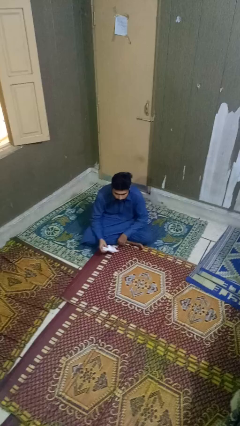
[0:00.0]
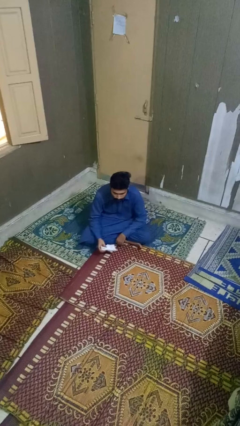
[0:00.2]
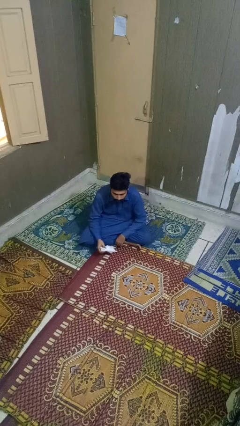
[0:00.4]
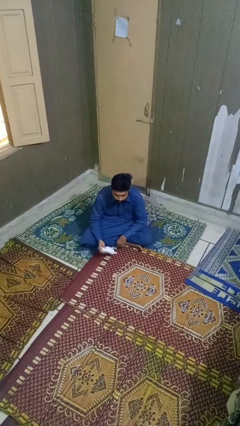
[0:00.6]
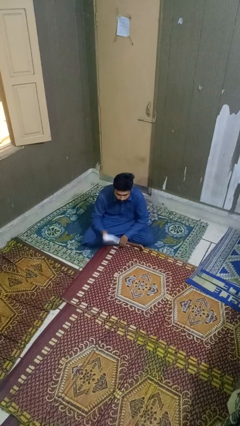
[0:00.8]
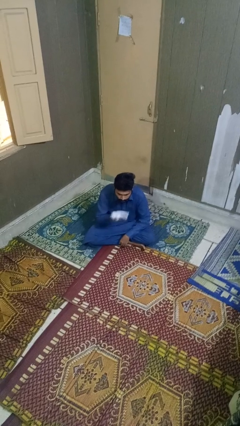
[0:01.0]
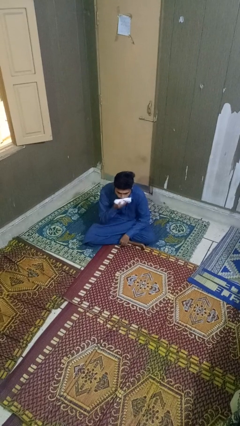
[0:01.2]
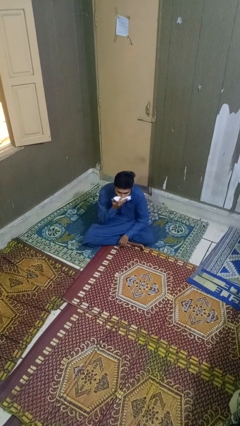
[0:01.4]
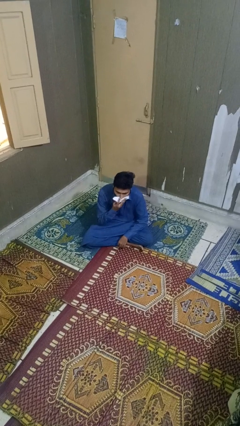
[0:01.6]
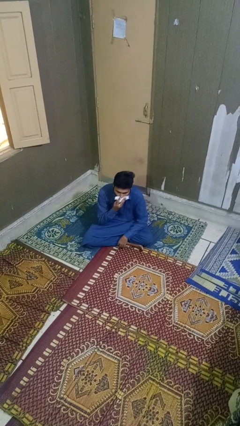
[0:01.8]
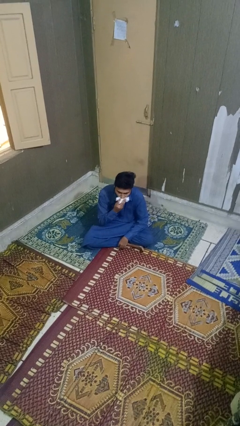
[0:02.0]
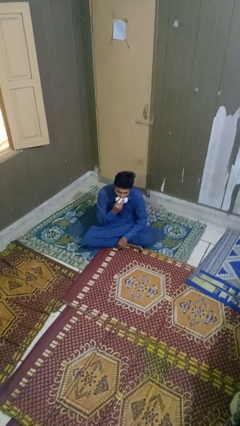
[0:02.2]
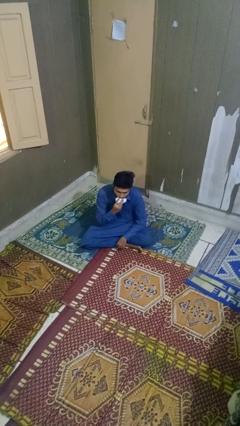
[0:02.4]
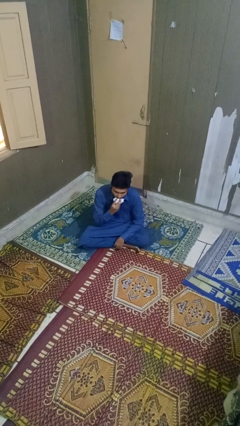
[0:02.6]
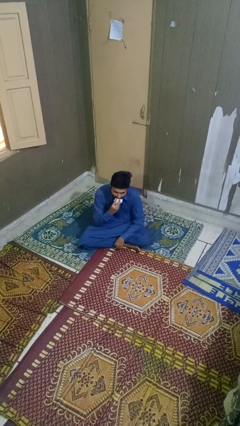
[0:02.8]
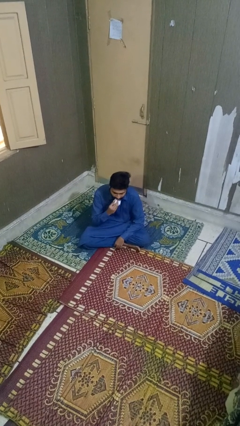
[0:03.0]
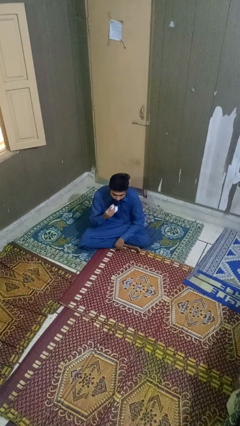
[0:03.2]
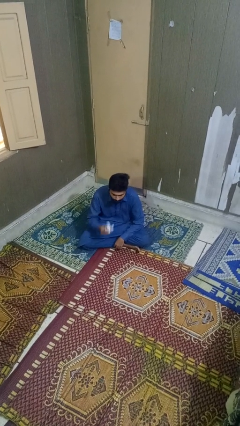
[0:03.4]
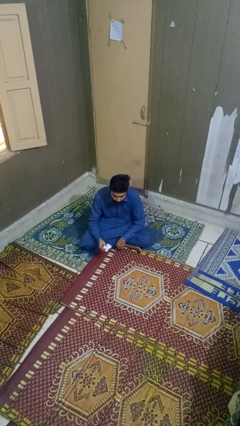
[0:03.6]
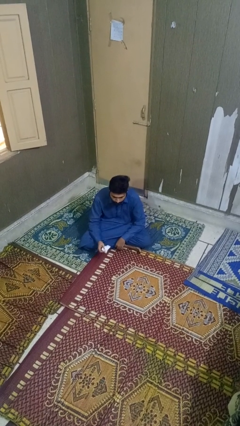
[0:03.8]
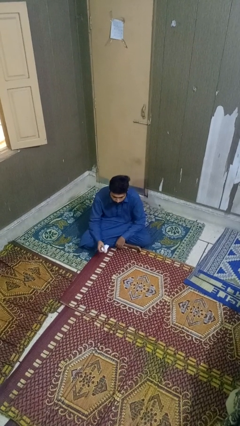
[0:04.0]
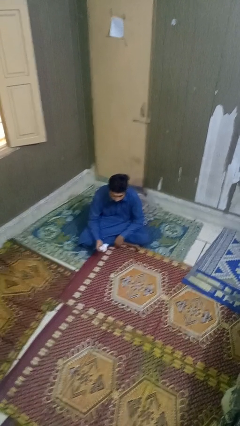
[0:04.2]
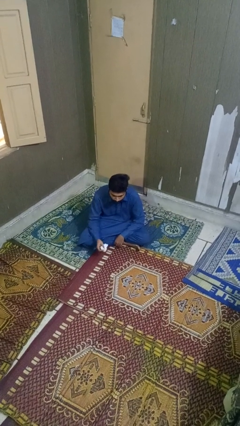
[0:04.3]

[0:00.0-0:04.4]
person wipes mouth with napkin

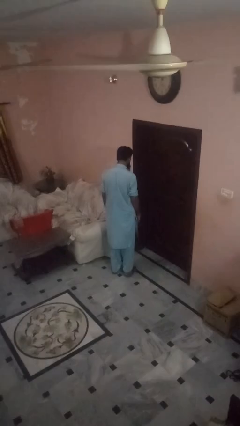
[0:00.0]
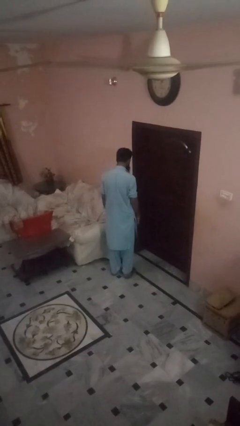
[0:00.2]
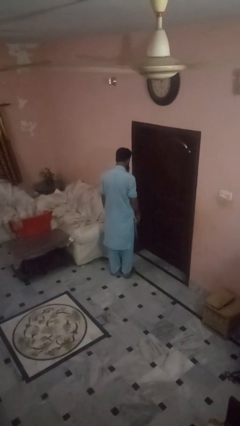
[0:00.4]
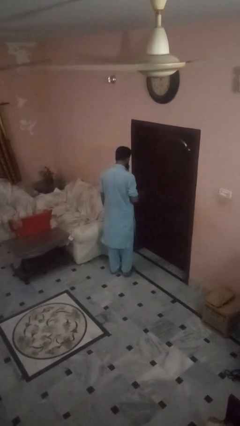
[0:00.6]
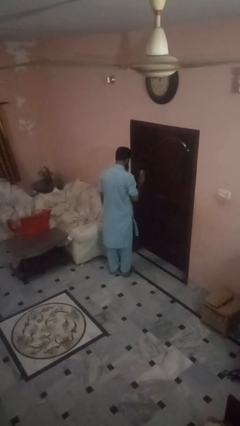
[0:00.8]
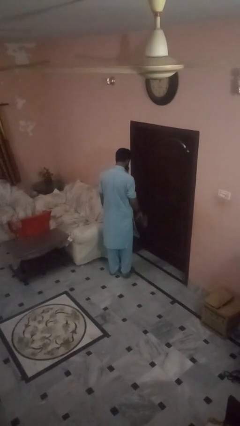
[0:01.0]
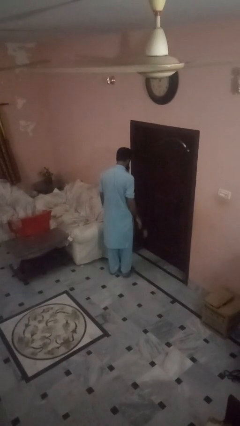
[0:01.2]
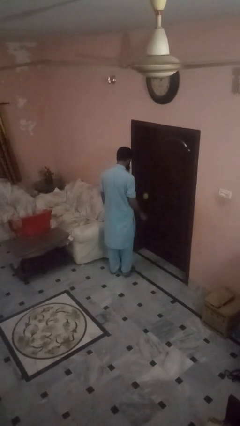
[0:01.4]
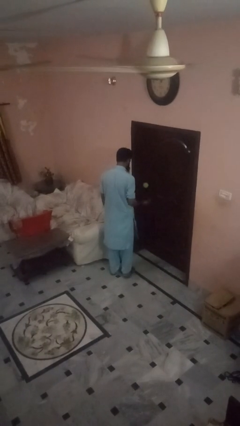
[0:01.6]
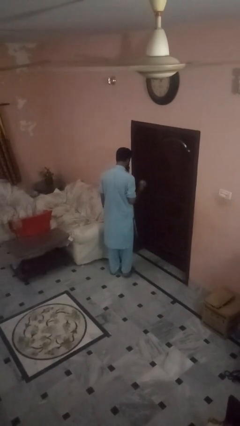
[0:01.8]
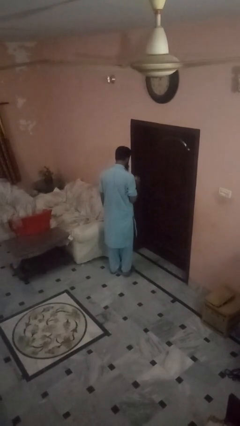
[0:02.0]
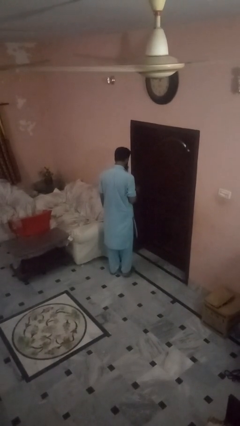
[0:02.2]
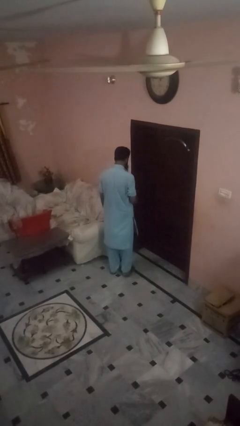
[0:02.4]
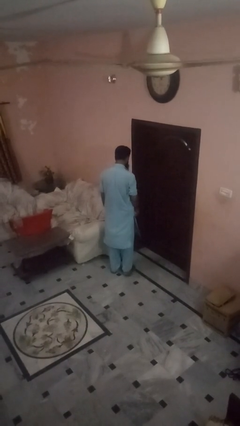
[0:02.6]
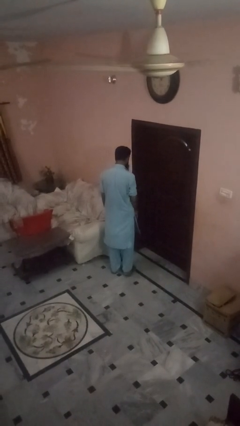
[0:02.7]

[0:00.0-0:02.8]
person bounces ball on floor

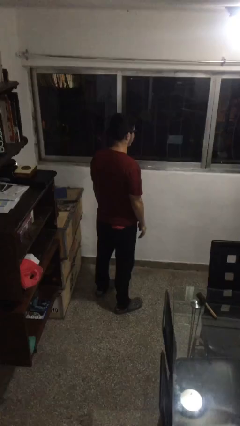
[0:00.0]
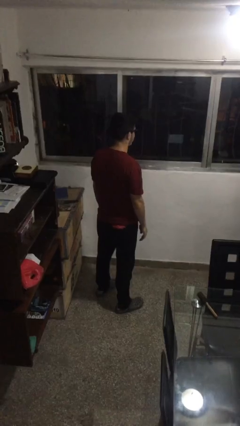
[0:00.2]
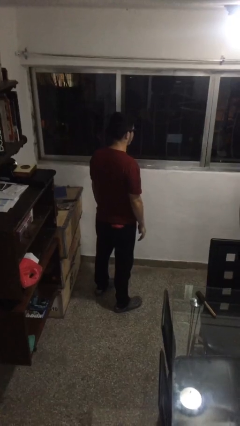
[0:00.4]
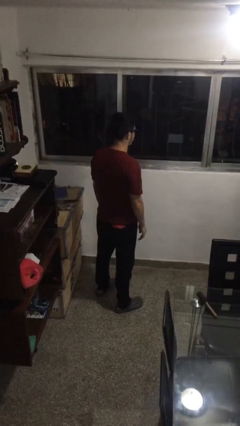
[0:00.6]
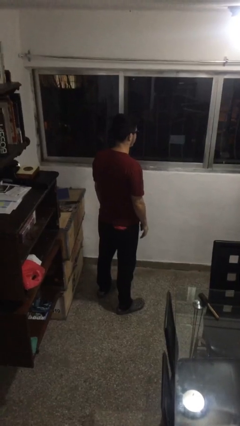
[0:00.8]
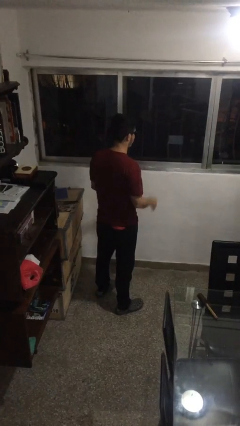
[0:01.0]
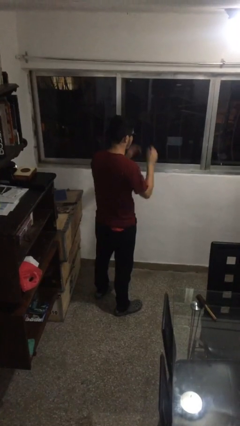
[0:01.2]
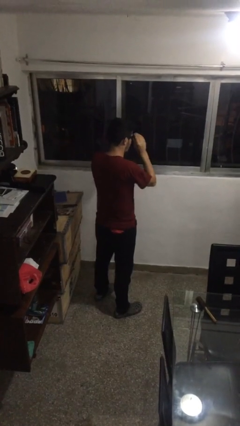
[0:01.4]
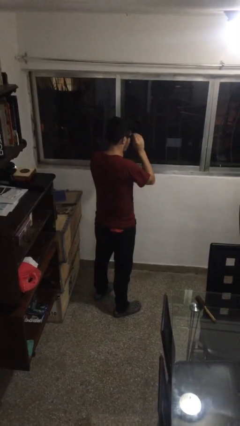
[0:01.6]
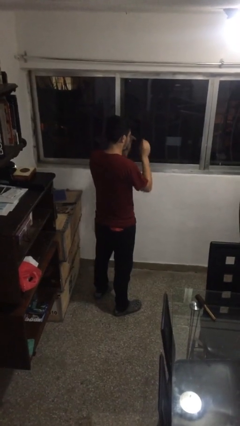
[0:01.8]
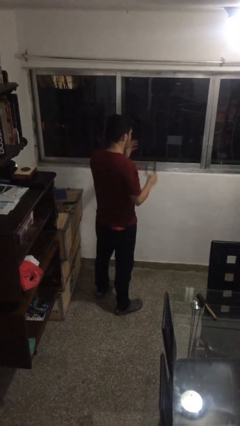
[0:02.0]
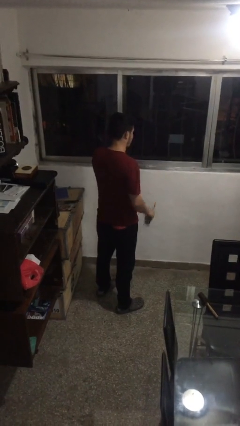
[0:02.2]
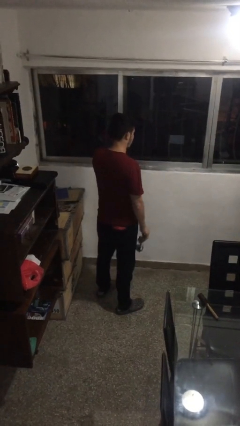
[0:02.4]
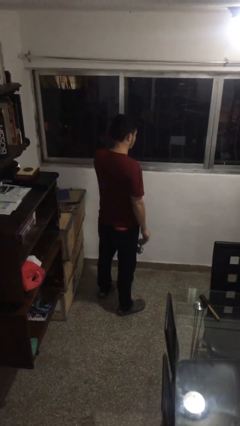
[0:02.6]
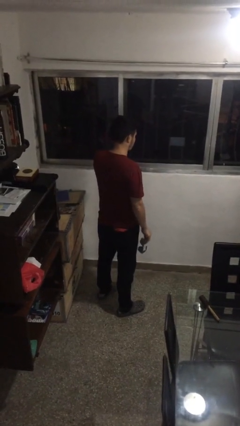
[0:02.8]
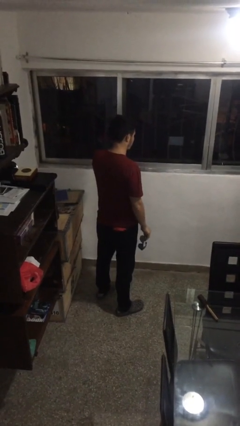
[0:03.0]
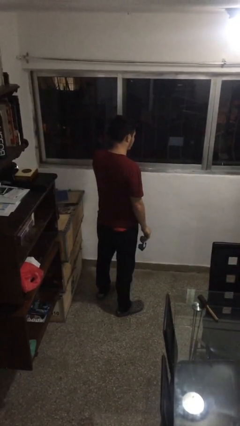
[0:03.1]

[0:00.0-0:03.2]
person takes off sunglasses

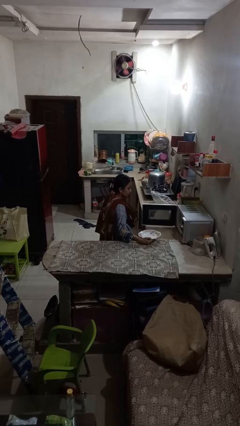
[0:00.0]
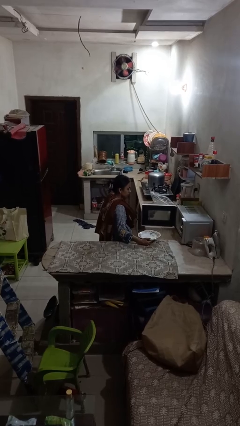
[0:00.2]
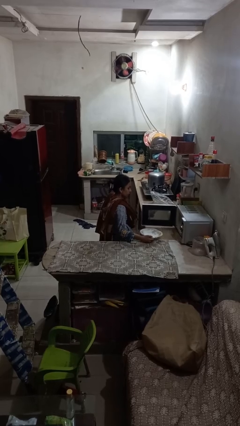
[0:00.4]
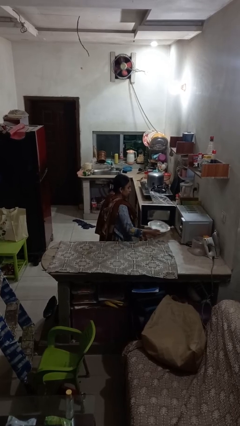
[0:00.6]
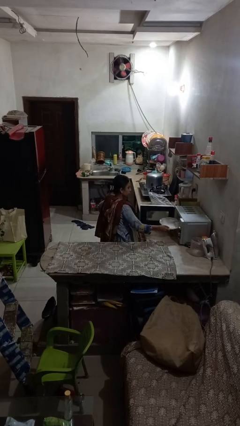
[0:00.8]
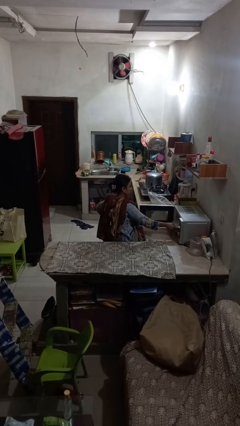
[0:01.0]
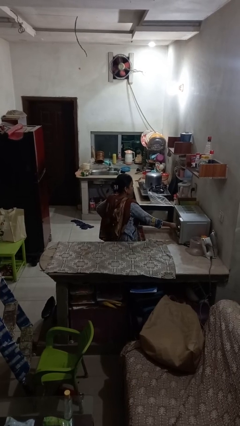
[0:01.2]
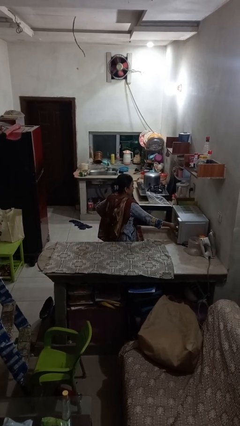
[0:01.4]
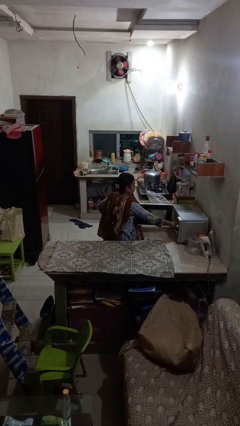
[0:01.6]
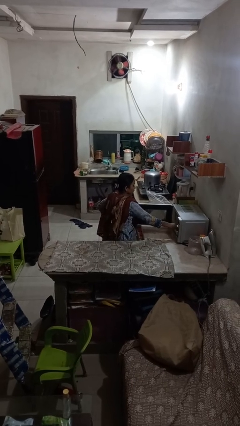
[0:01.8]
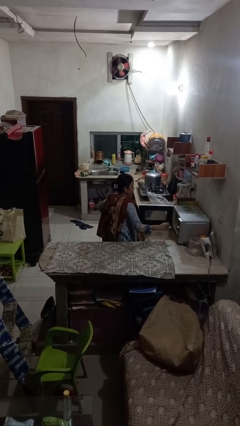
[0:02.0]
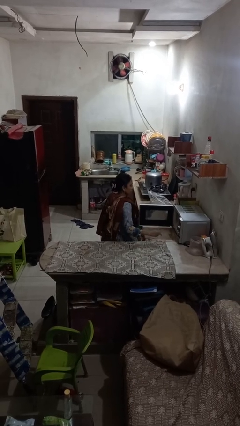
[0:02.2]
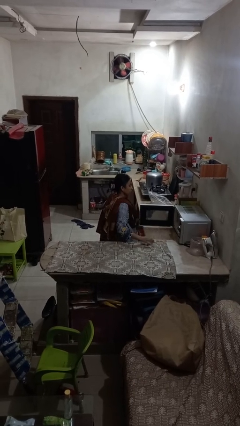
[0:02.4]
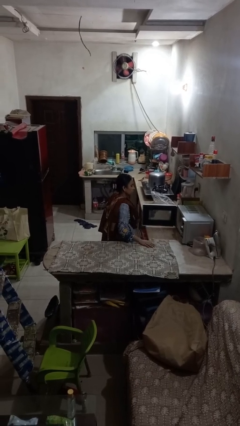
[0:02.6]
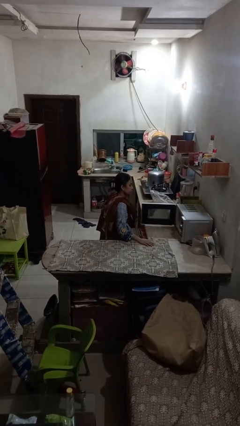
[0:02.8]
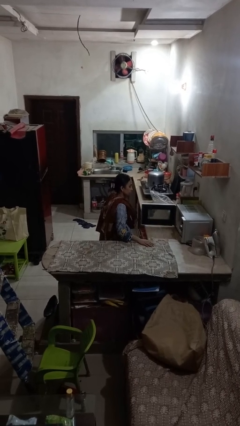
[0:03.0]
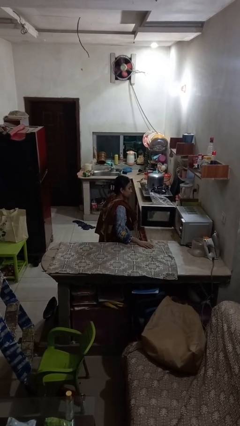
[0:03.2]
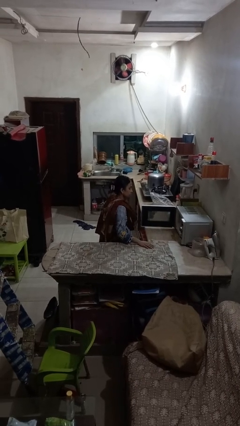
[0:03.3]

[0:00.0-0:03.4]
person puts object into microwave

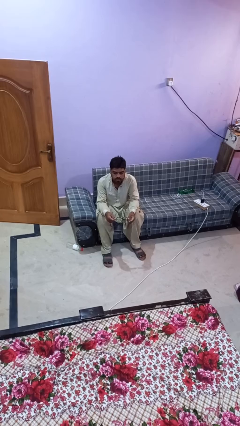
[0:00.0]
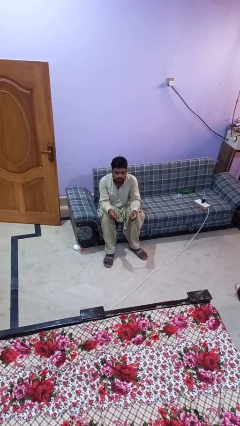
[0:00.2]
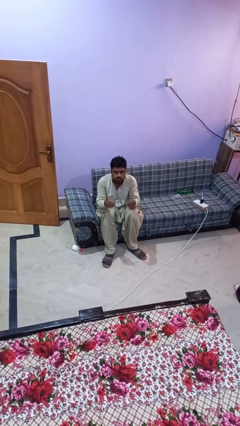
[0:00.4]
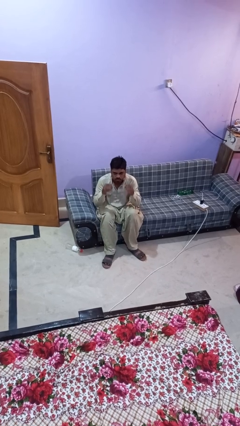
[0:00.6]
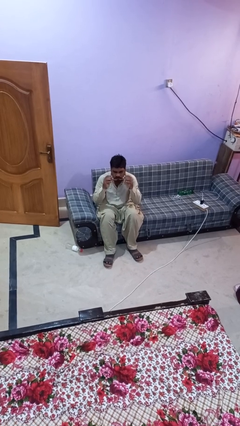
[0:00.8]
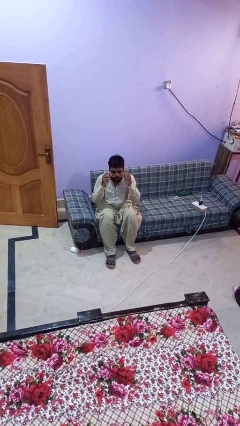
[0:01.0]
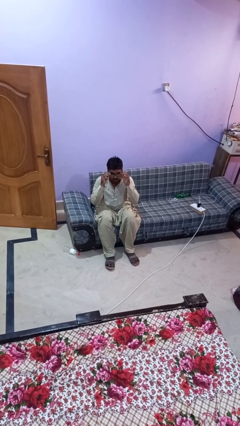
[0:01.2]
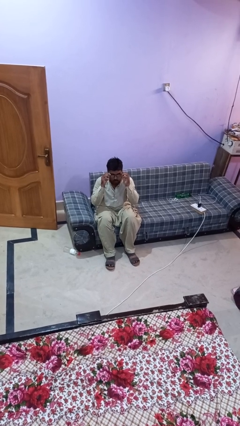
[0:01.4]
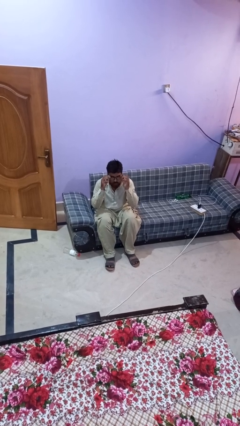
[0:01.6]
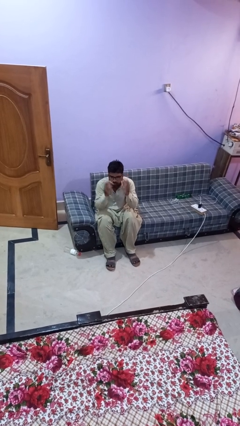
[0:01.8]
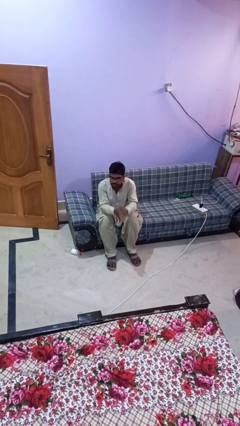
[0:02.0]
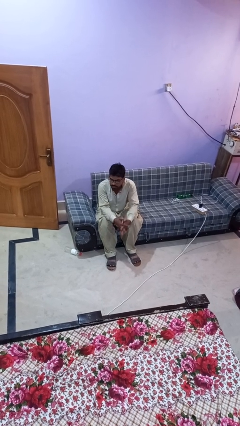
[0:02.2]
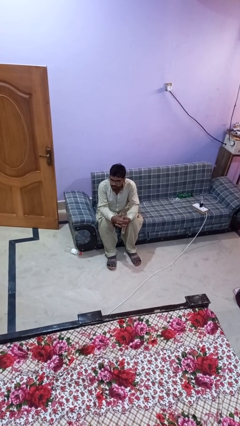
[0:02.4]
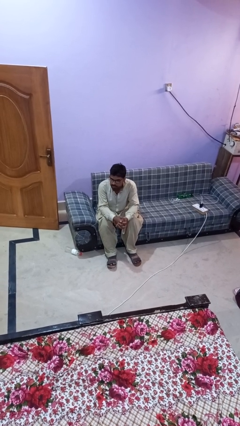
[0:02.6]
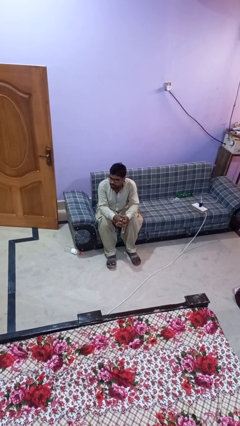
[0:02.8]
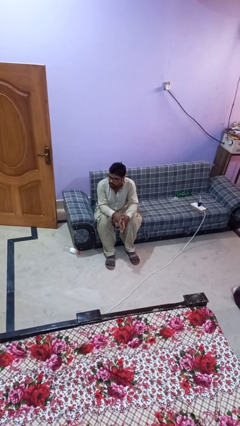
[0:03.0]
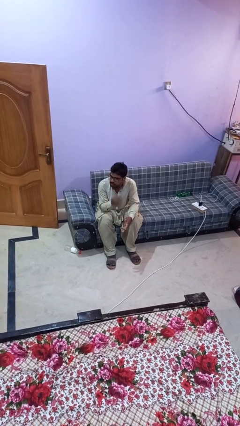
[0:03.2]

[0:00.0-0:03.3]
person puts on glasses
